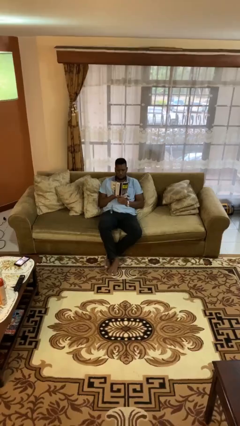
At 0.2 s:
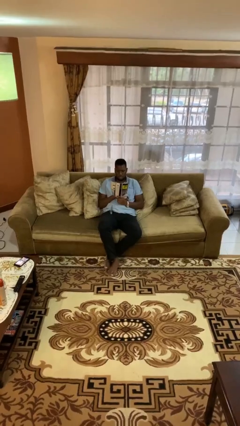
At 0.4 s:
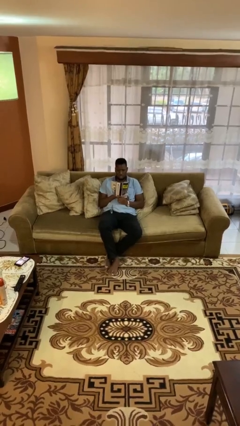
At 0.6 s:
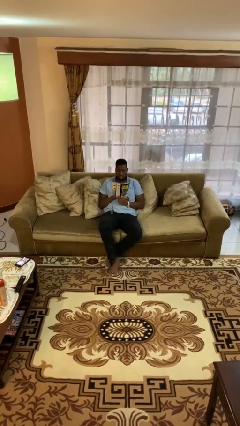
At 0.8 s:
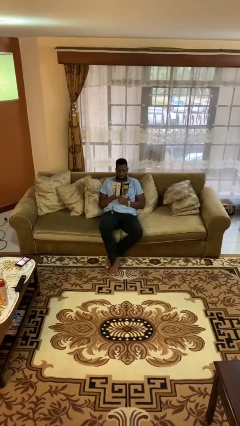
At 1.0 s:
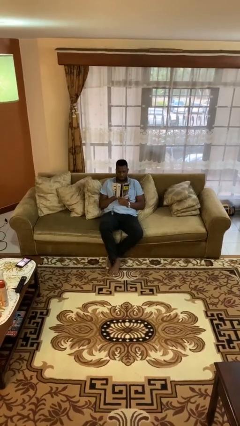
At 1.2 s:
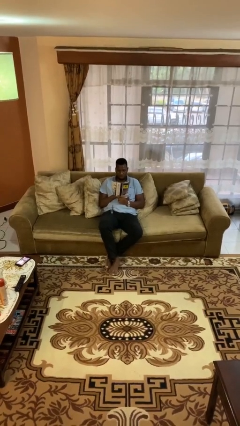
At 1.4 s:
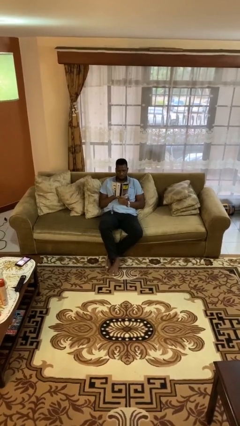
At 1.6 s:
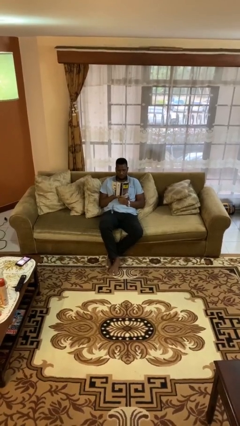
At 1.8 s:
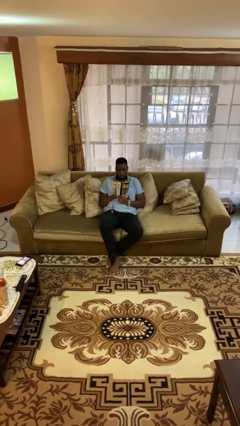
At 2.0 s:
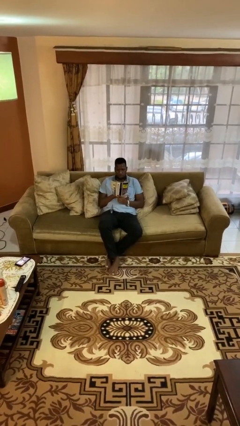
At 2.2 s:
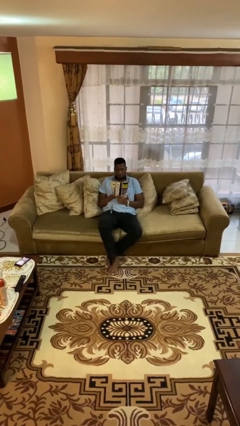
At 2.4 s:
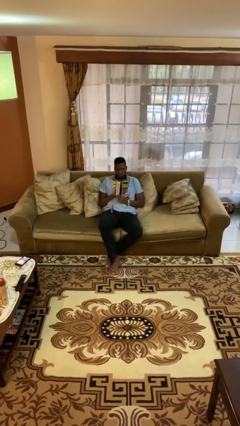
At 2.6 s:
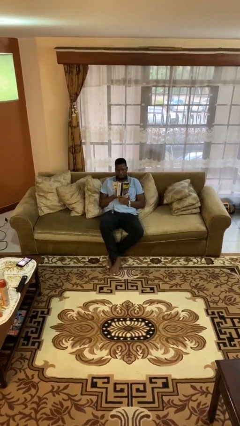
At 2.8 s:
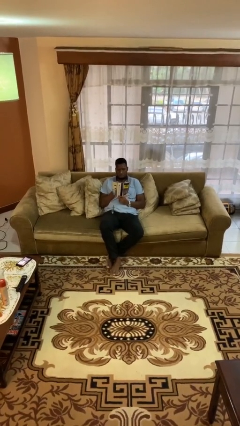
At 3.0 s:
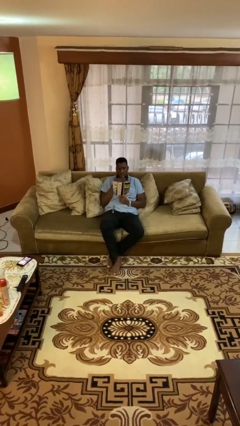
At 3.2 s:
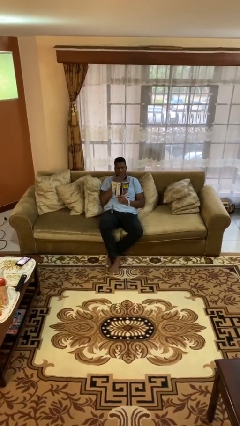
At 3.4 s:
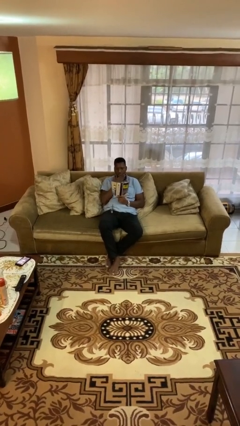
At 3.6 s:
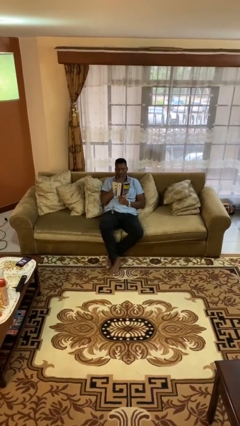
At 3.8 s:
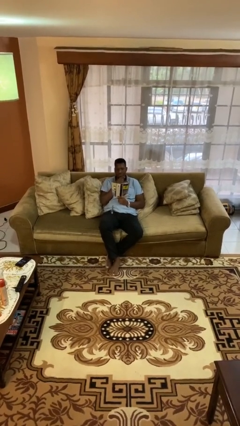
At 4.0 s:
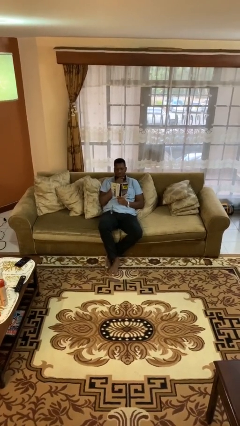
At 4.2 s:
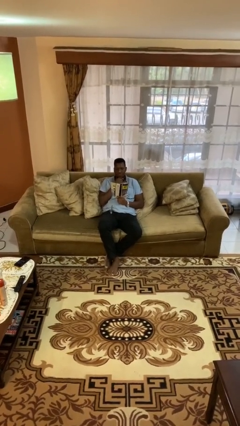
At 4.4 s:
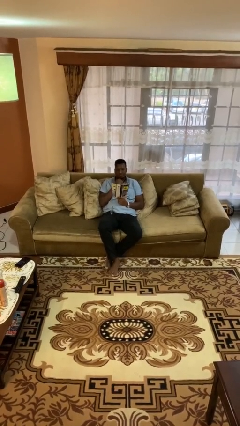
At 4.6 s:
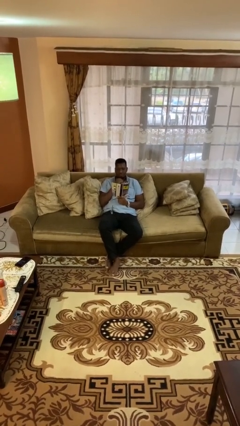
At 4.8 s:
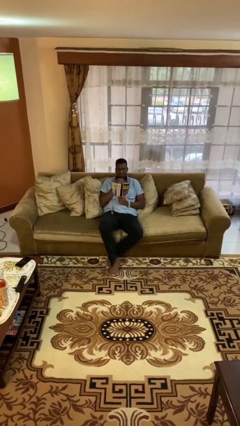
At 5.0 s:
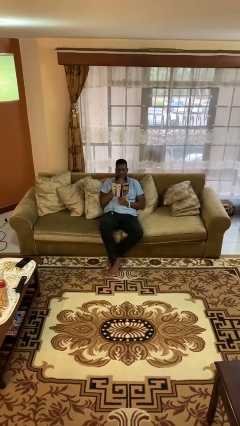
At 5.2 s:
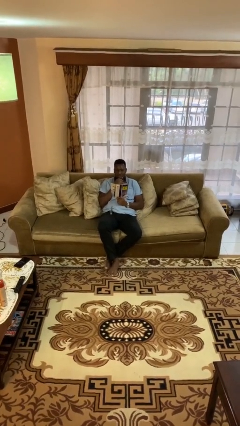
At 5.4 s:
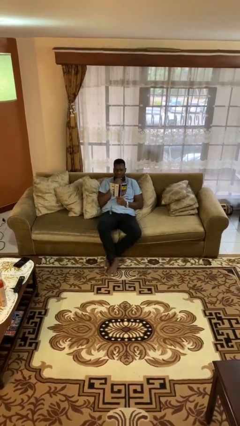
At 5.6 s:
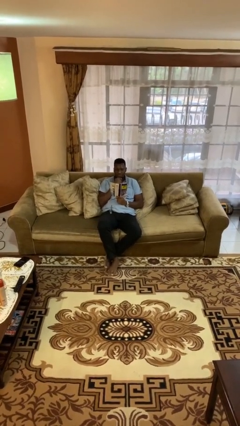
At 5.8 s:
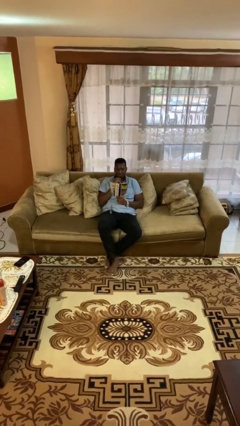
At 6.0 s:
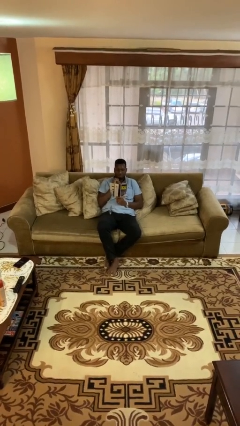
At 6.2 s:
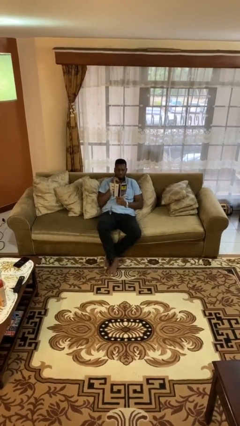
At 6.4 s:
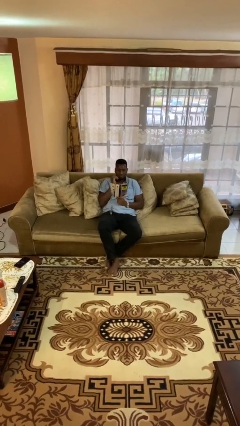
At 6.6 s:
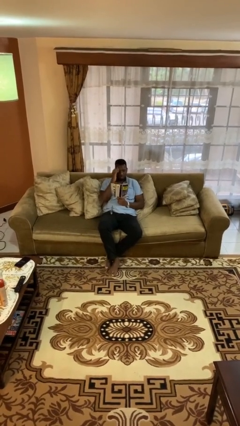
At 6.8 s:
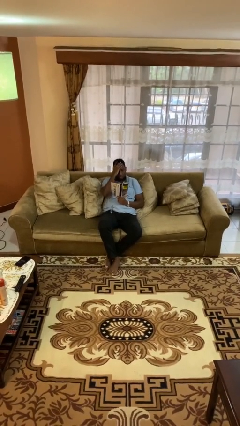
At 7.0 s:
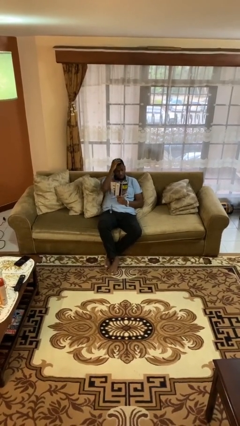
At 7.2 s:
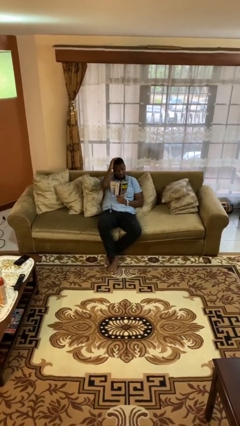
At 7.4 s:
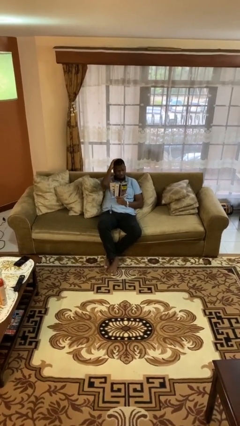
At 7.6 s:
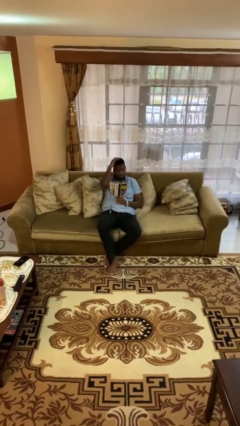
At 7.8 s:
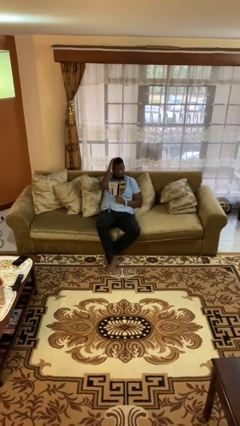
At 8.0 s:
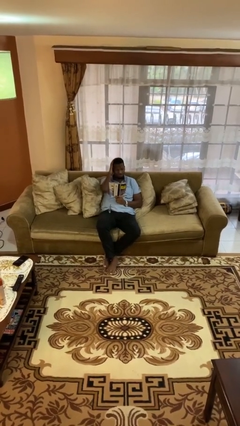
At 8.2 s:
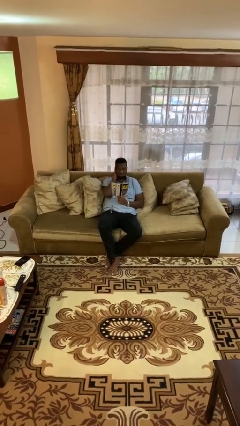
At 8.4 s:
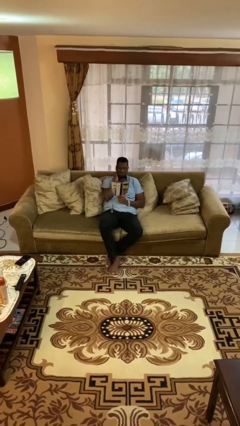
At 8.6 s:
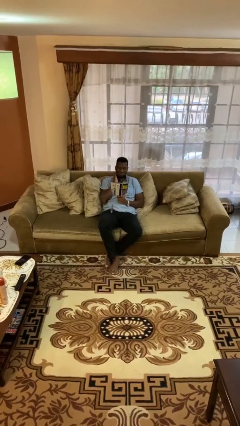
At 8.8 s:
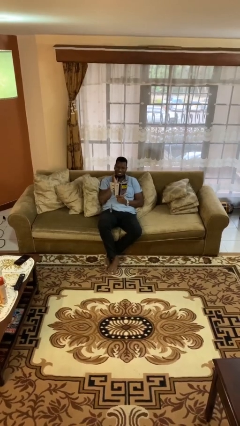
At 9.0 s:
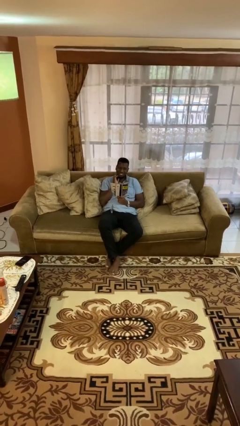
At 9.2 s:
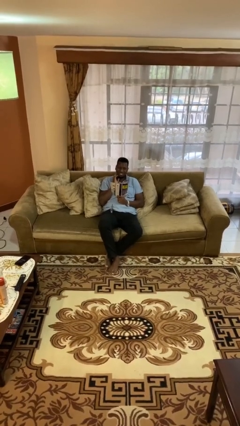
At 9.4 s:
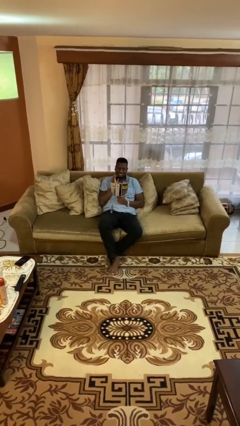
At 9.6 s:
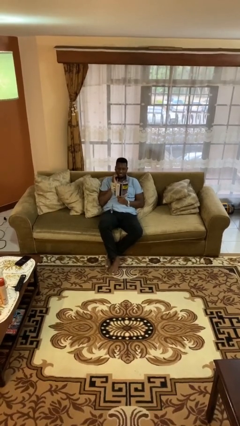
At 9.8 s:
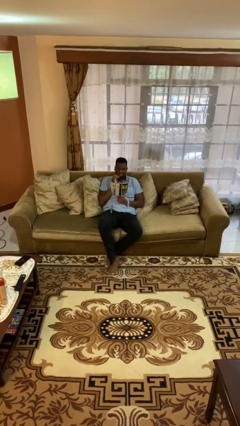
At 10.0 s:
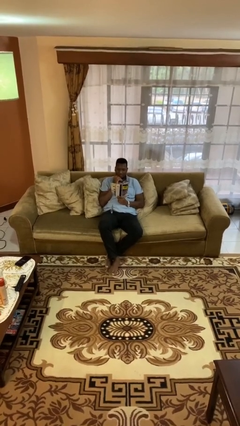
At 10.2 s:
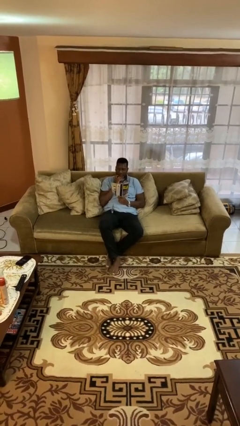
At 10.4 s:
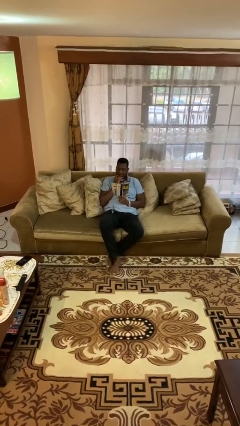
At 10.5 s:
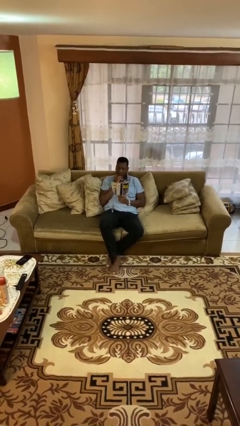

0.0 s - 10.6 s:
person reads document

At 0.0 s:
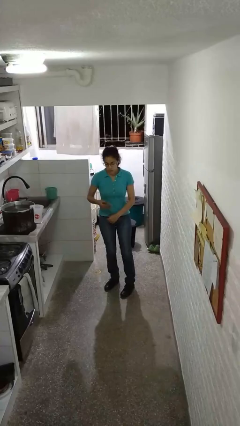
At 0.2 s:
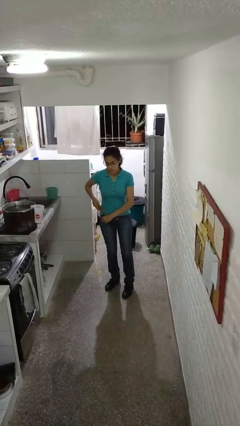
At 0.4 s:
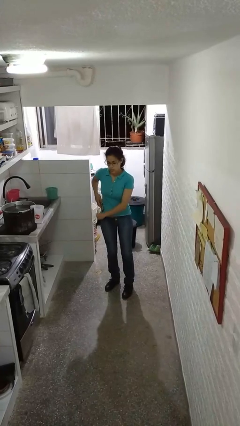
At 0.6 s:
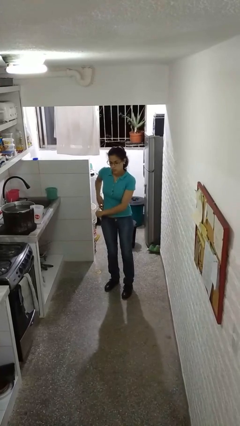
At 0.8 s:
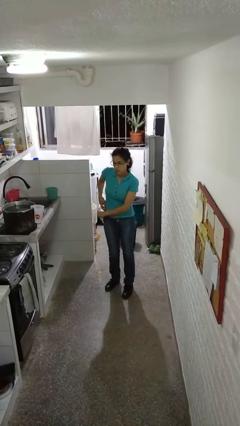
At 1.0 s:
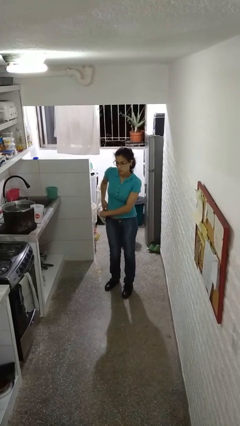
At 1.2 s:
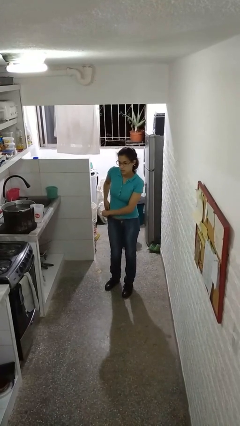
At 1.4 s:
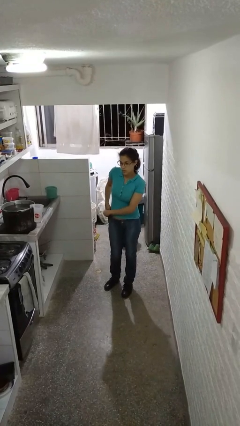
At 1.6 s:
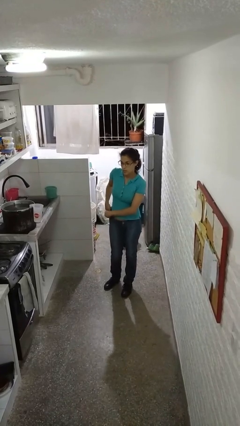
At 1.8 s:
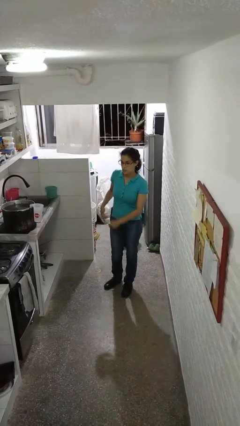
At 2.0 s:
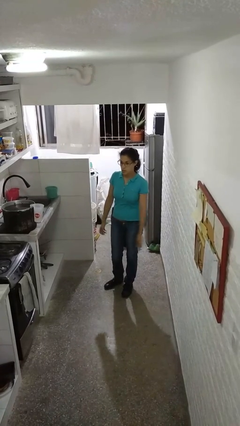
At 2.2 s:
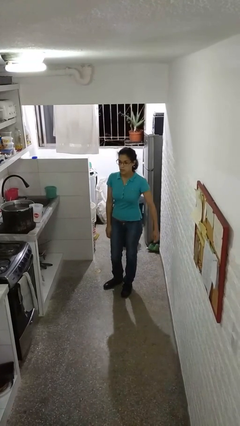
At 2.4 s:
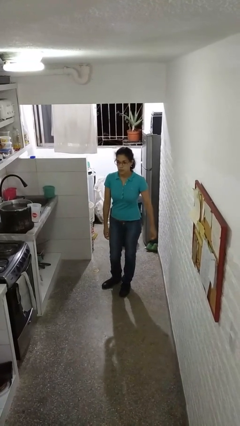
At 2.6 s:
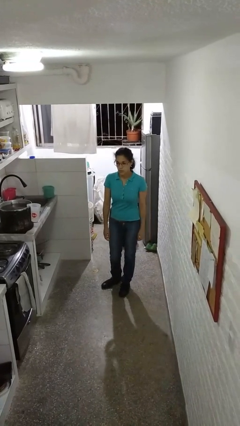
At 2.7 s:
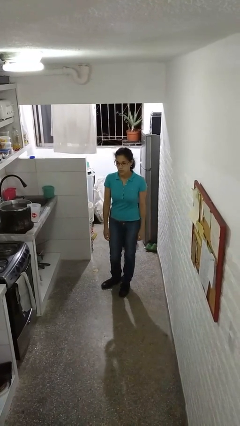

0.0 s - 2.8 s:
person puts phone into pocket

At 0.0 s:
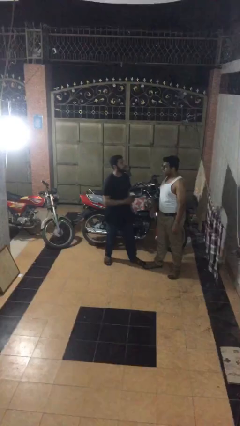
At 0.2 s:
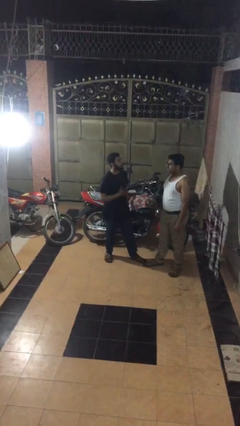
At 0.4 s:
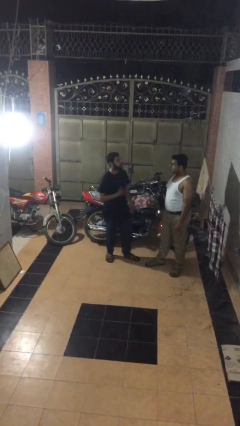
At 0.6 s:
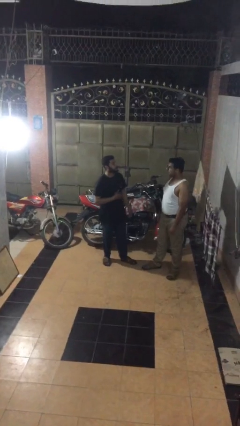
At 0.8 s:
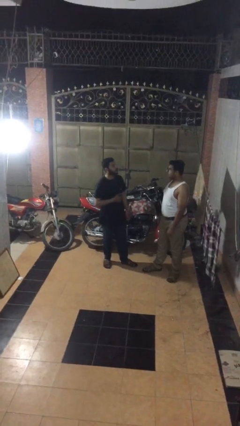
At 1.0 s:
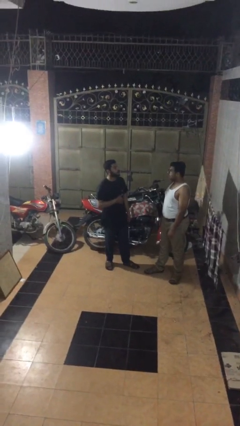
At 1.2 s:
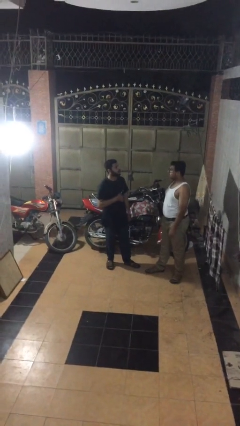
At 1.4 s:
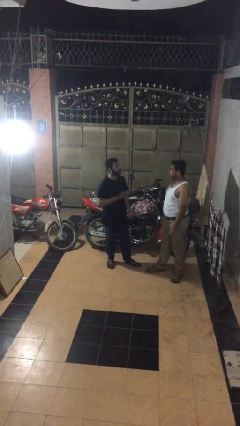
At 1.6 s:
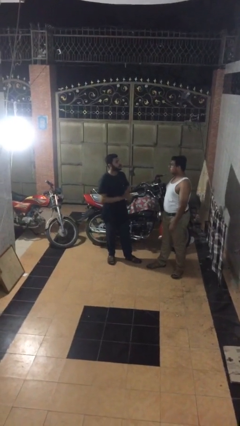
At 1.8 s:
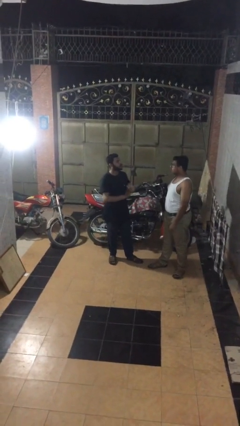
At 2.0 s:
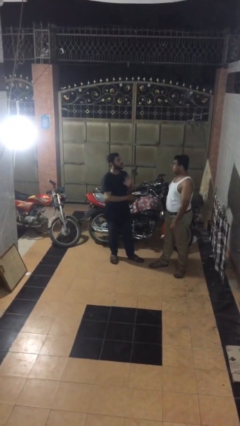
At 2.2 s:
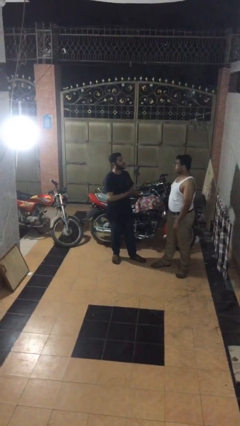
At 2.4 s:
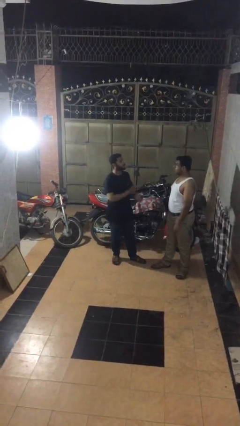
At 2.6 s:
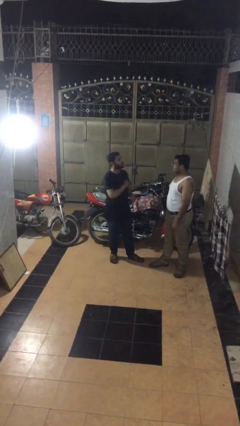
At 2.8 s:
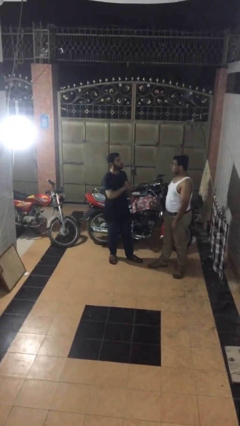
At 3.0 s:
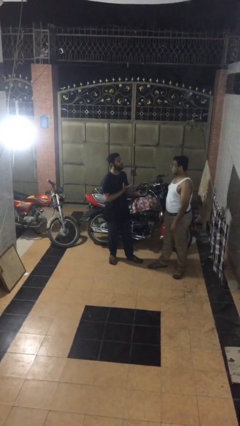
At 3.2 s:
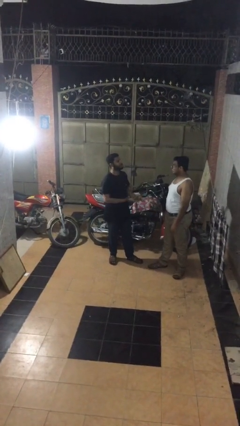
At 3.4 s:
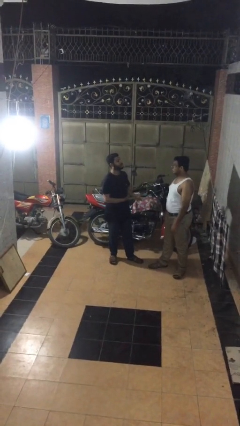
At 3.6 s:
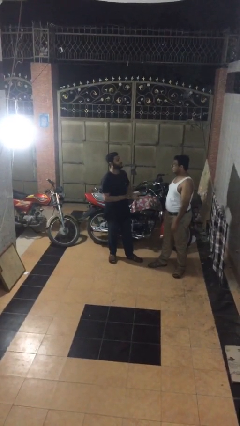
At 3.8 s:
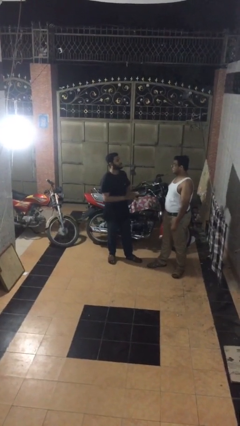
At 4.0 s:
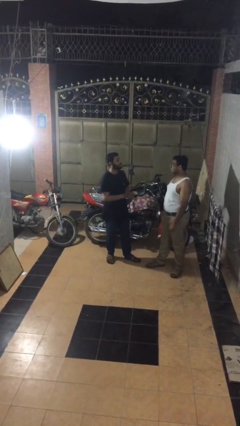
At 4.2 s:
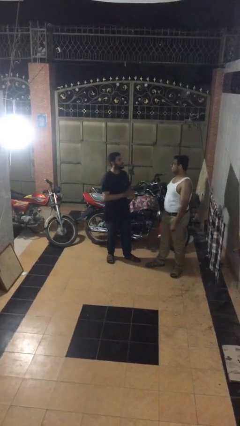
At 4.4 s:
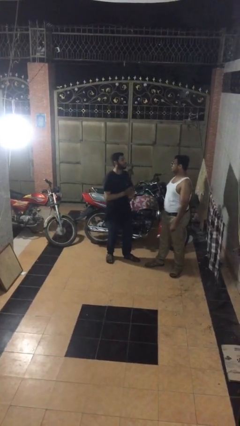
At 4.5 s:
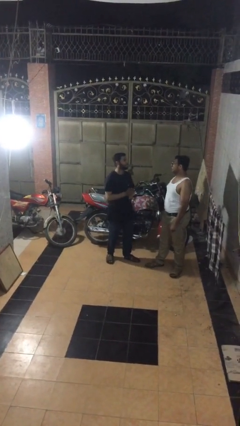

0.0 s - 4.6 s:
person talks to person

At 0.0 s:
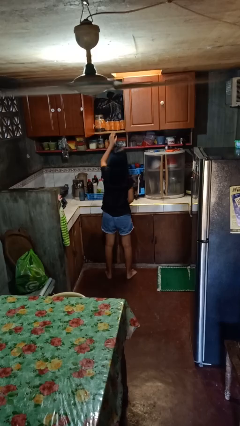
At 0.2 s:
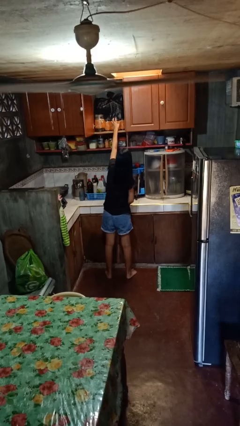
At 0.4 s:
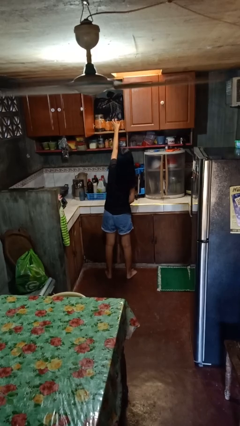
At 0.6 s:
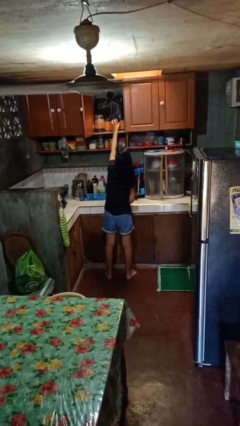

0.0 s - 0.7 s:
person picks up object from cabinet
